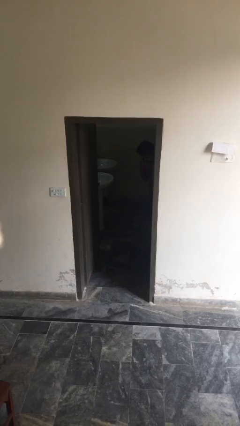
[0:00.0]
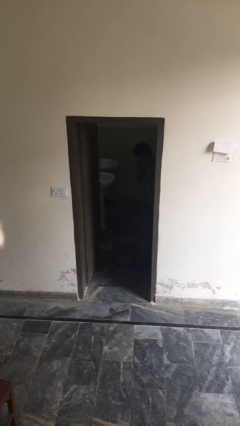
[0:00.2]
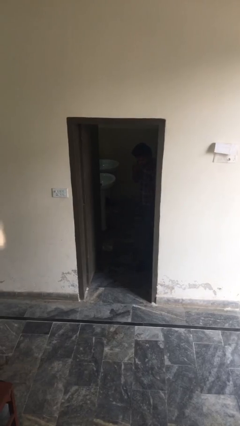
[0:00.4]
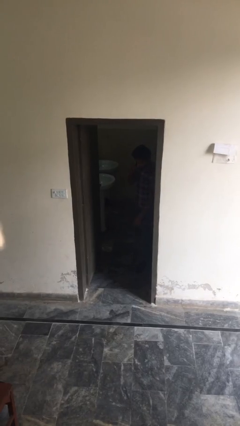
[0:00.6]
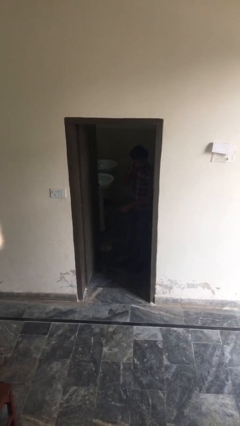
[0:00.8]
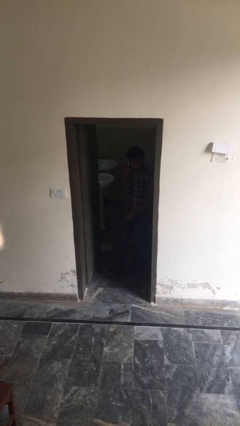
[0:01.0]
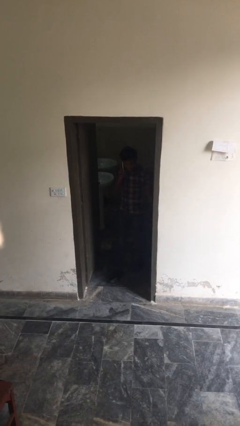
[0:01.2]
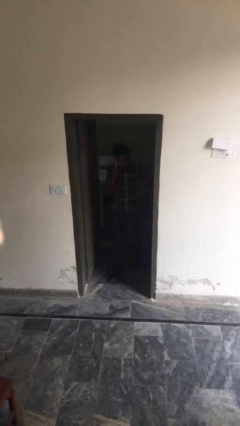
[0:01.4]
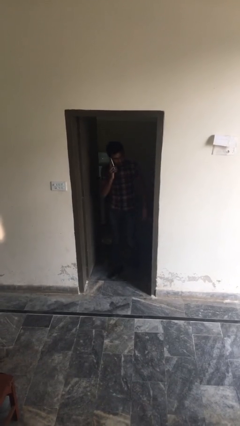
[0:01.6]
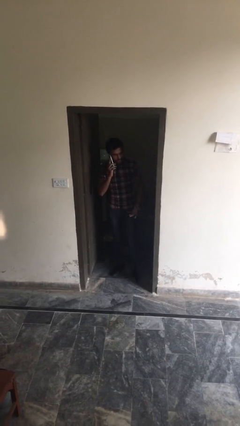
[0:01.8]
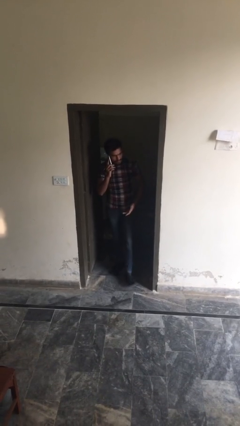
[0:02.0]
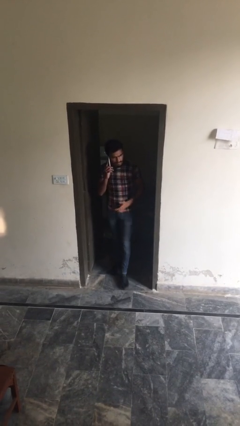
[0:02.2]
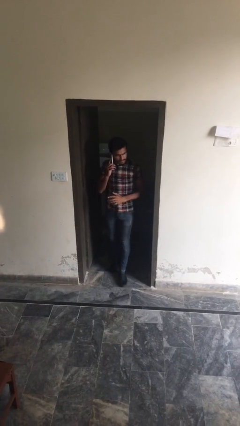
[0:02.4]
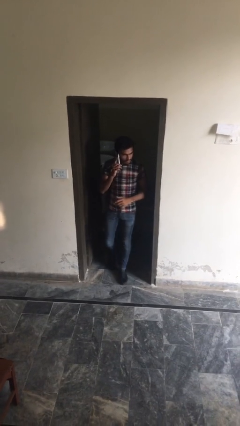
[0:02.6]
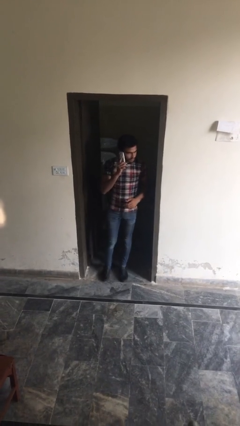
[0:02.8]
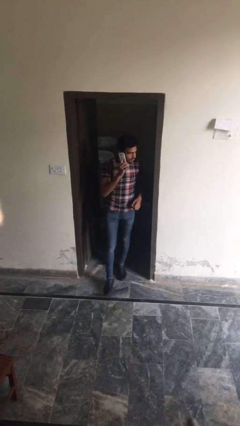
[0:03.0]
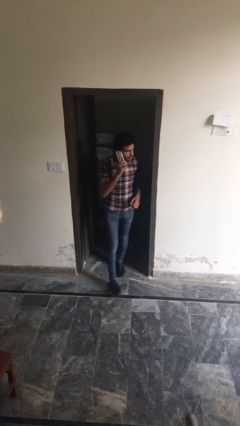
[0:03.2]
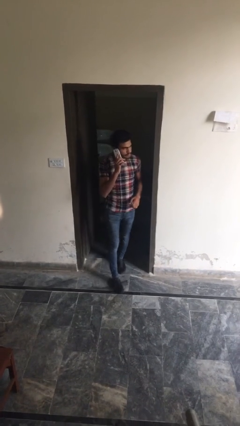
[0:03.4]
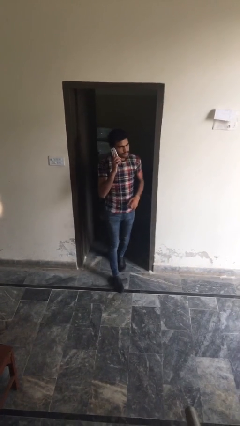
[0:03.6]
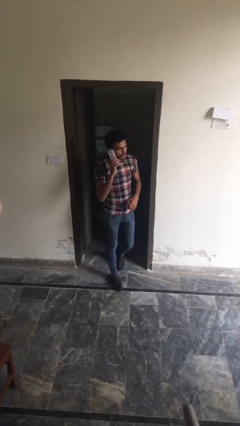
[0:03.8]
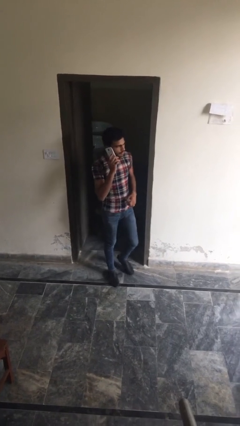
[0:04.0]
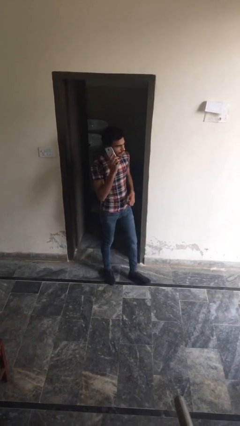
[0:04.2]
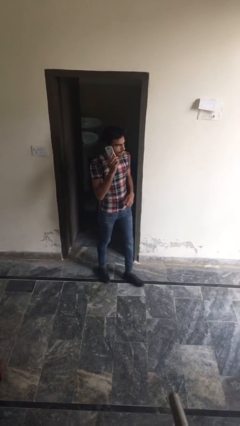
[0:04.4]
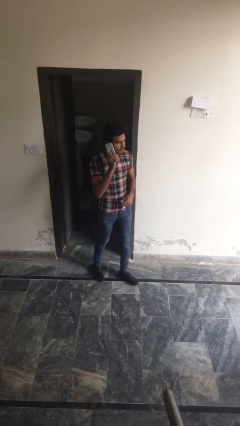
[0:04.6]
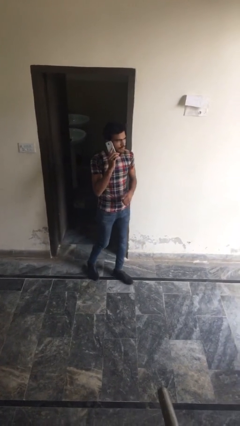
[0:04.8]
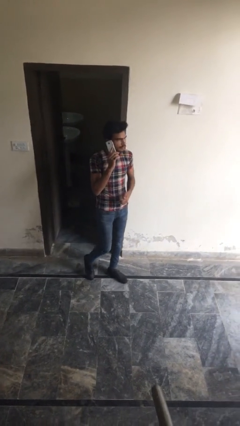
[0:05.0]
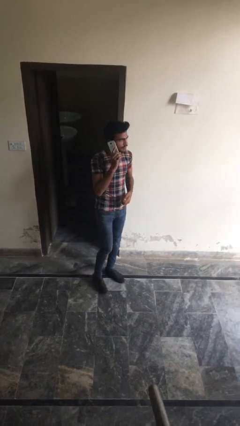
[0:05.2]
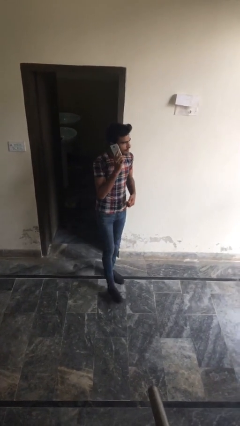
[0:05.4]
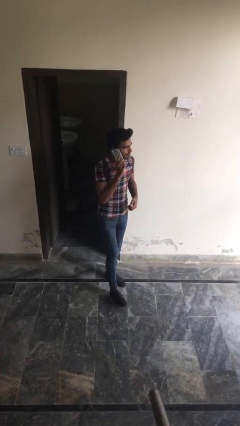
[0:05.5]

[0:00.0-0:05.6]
person enters scene through structure

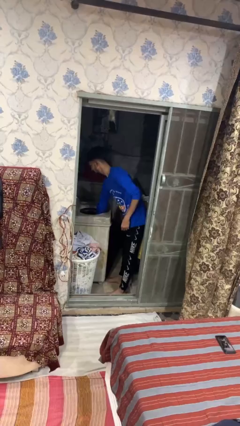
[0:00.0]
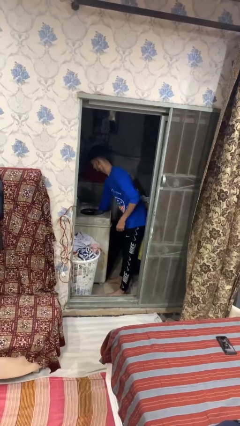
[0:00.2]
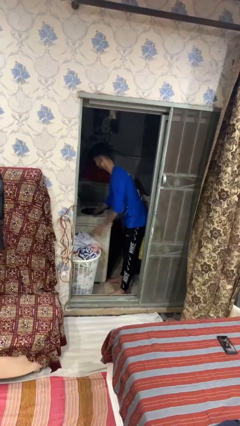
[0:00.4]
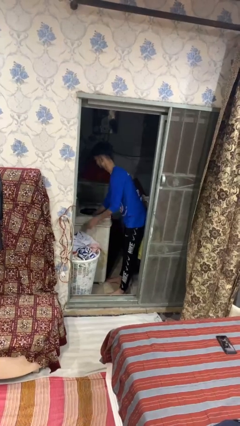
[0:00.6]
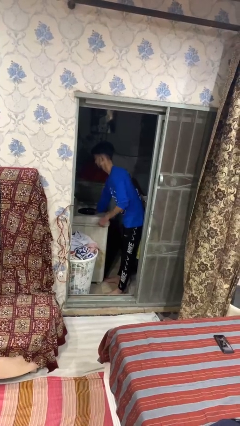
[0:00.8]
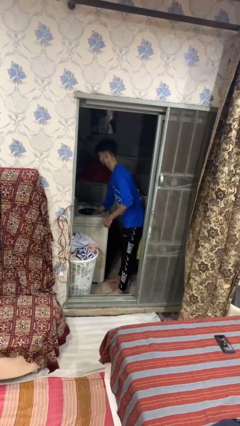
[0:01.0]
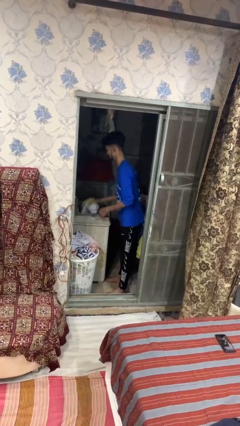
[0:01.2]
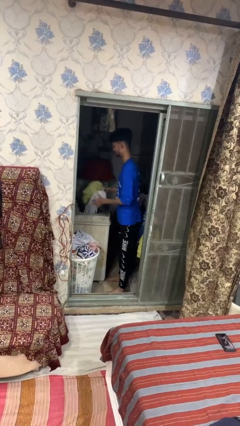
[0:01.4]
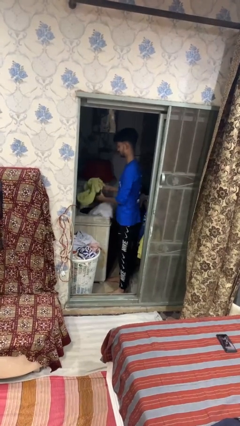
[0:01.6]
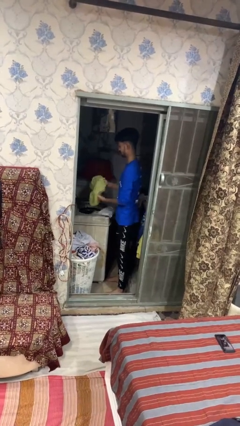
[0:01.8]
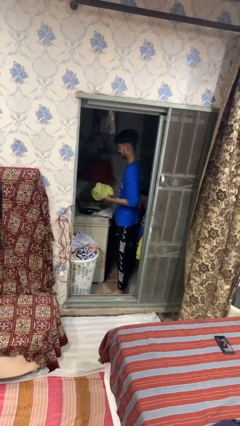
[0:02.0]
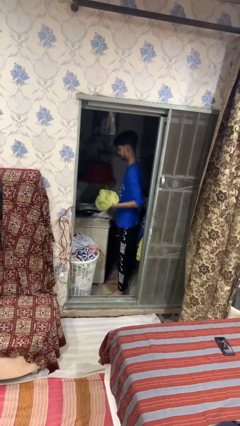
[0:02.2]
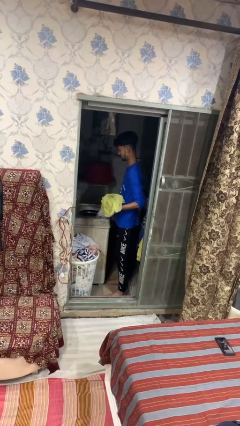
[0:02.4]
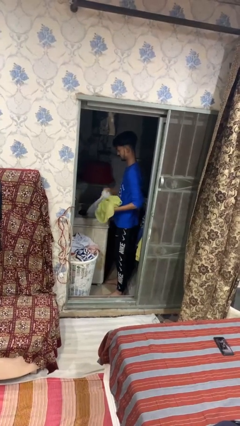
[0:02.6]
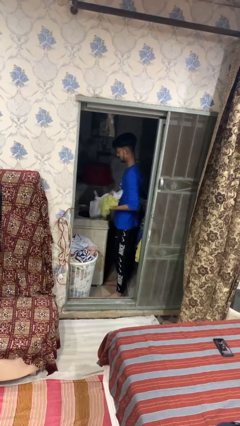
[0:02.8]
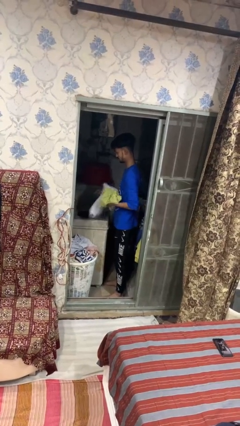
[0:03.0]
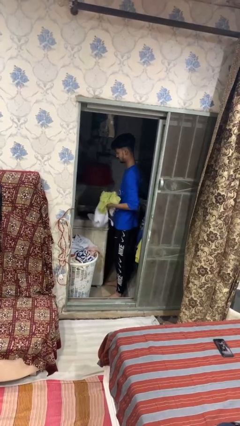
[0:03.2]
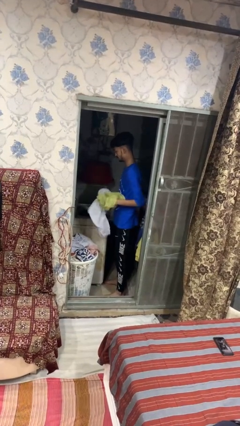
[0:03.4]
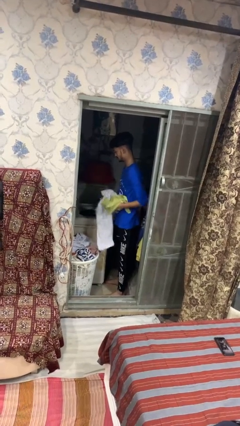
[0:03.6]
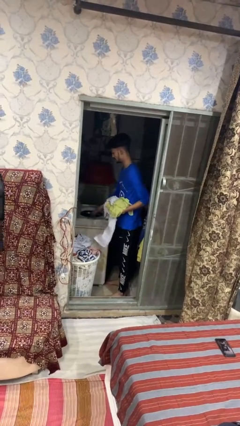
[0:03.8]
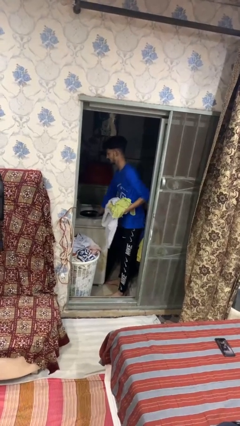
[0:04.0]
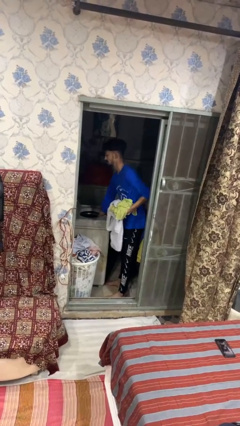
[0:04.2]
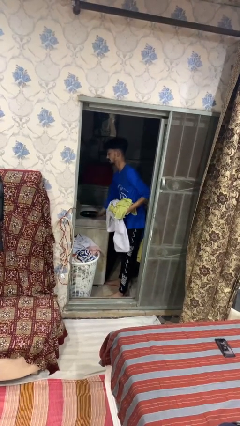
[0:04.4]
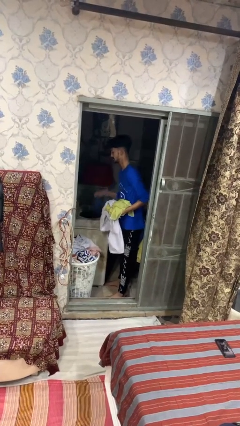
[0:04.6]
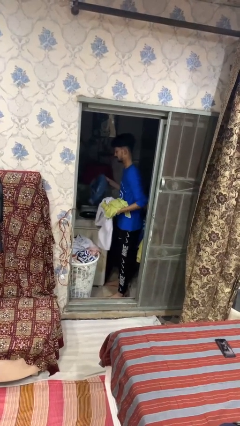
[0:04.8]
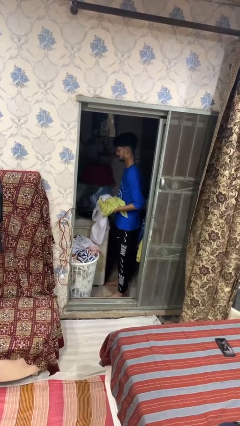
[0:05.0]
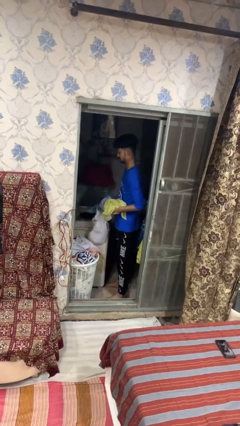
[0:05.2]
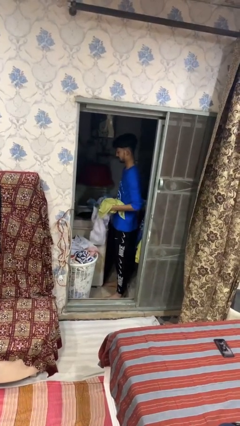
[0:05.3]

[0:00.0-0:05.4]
person unloads dryer

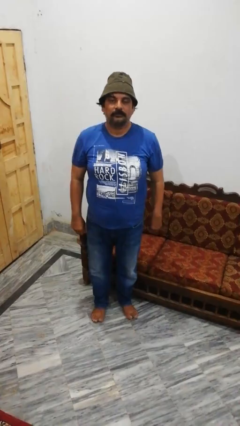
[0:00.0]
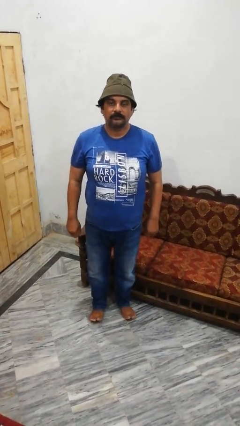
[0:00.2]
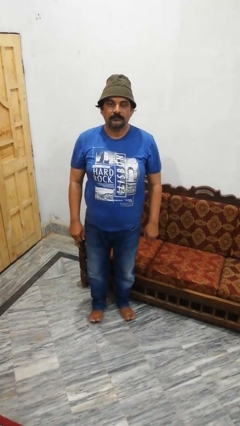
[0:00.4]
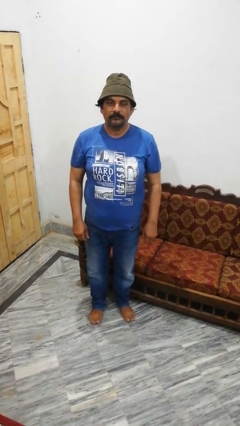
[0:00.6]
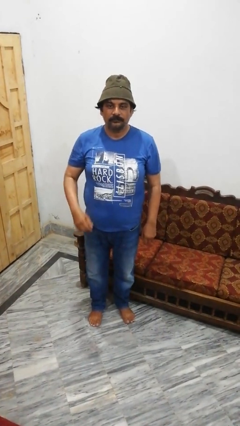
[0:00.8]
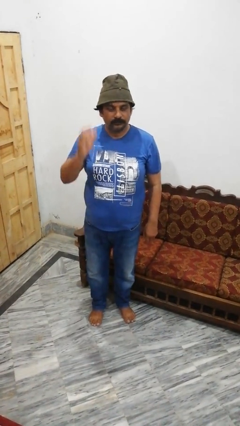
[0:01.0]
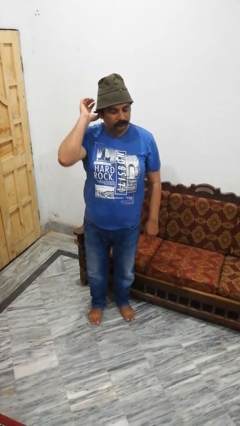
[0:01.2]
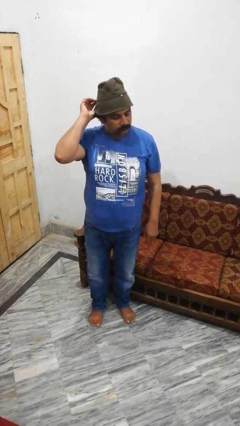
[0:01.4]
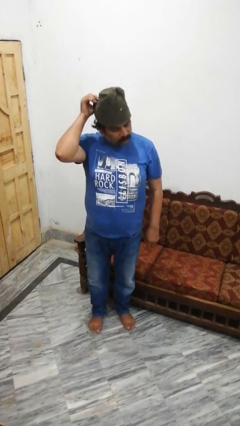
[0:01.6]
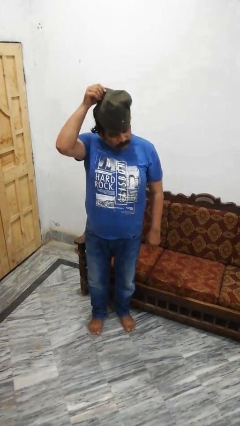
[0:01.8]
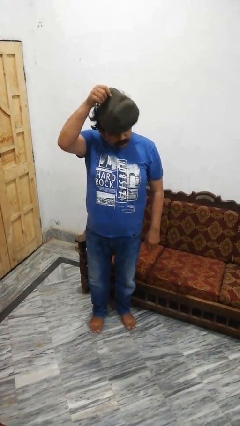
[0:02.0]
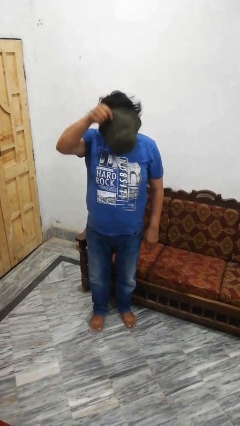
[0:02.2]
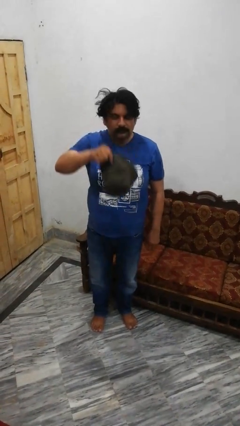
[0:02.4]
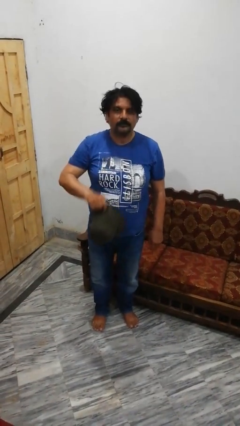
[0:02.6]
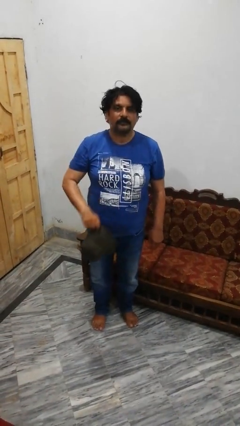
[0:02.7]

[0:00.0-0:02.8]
person takes off hat

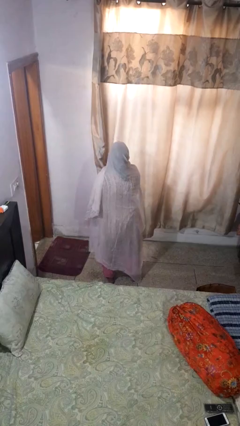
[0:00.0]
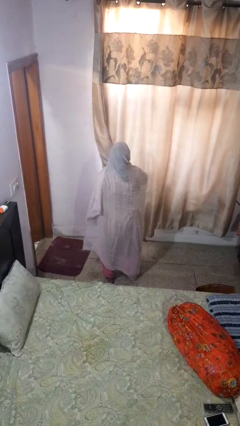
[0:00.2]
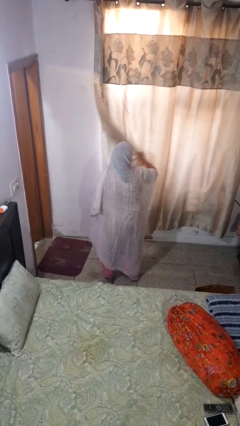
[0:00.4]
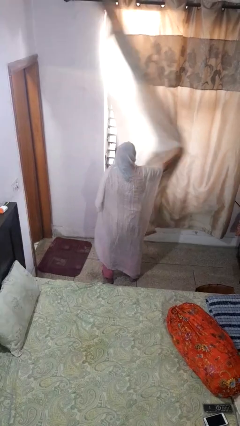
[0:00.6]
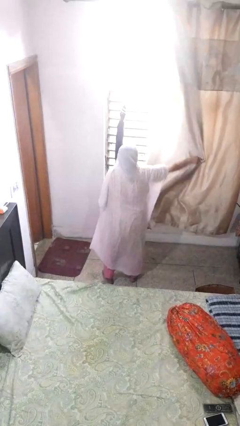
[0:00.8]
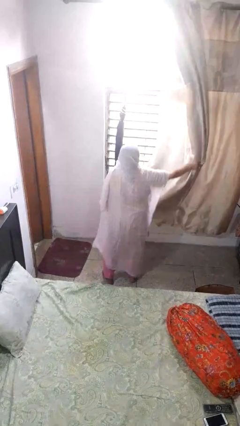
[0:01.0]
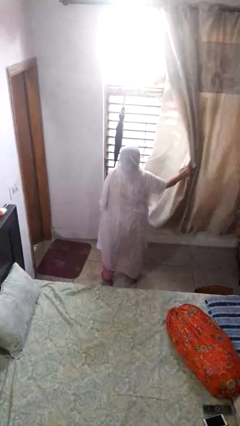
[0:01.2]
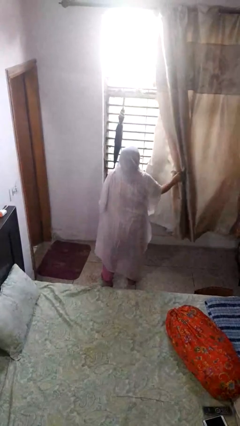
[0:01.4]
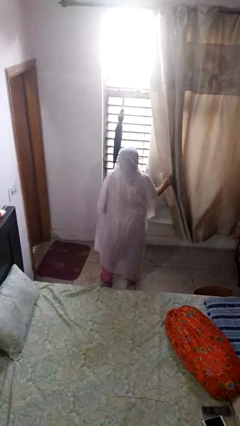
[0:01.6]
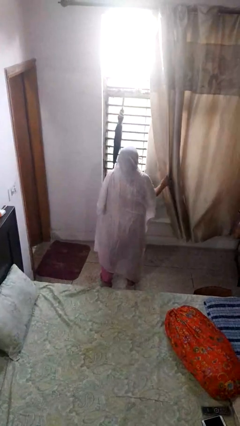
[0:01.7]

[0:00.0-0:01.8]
person opens curtains

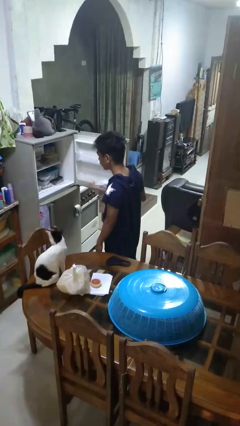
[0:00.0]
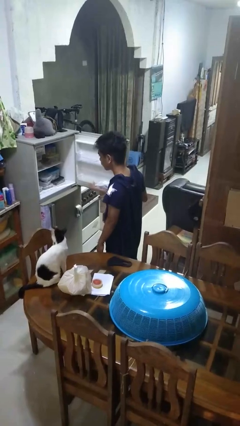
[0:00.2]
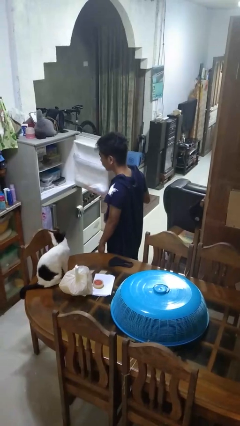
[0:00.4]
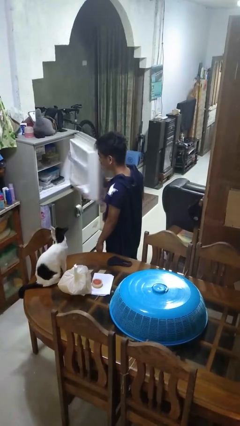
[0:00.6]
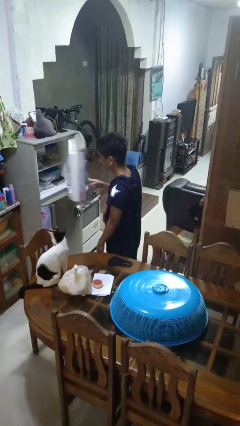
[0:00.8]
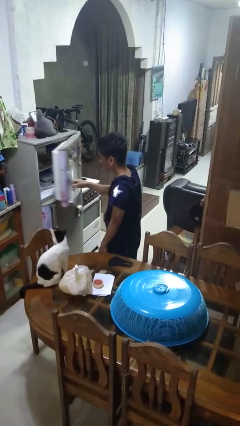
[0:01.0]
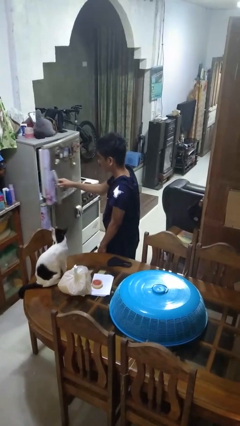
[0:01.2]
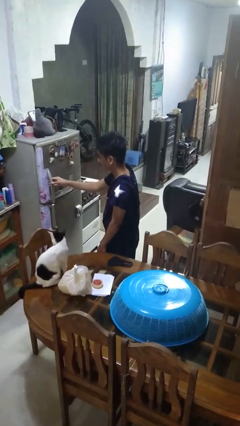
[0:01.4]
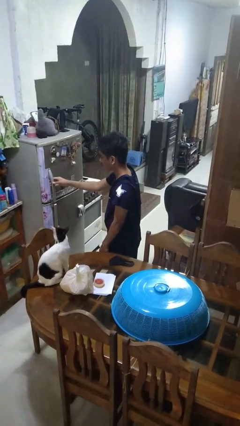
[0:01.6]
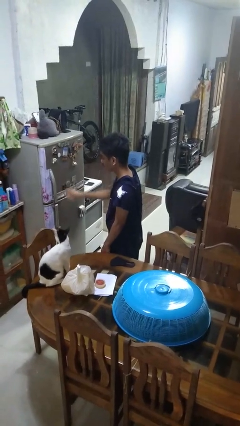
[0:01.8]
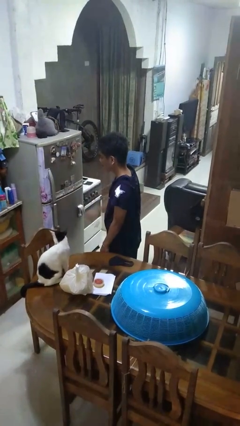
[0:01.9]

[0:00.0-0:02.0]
person closes refrigerator
